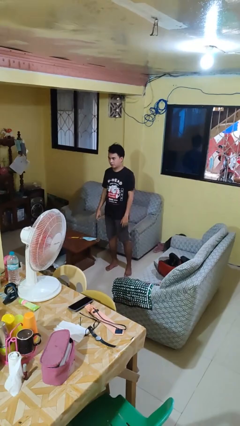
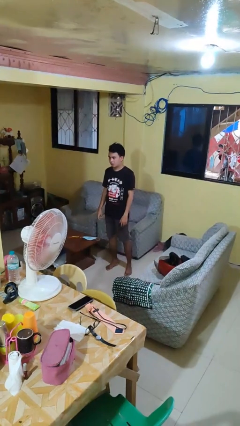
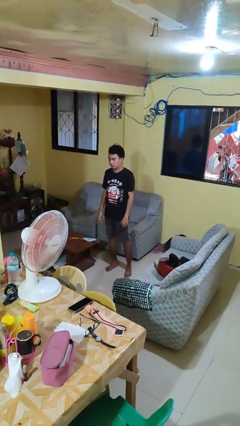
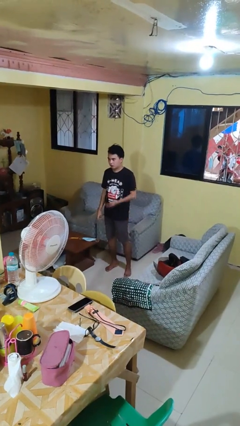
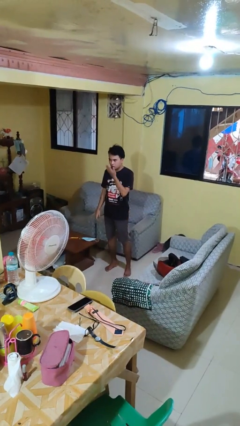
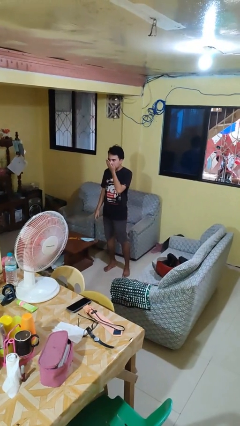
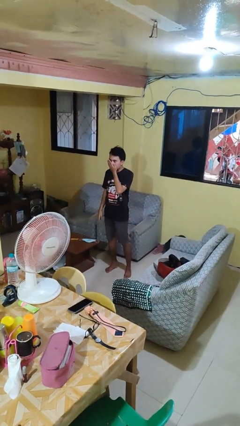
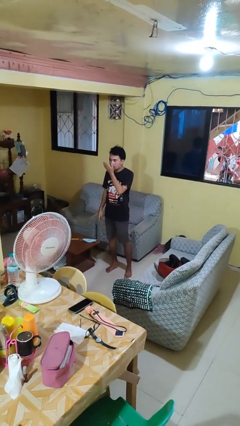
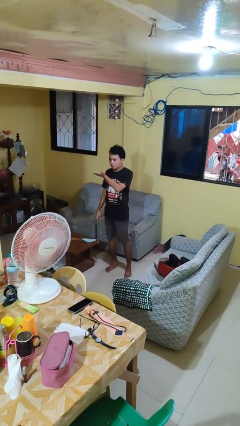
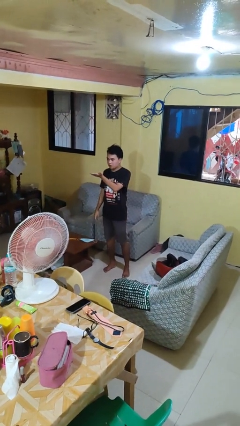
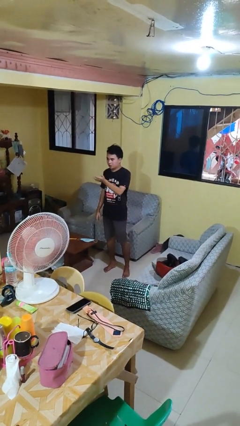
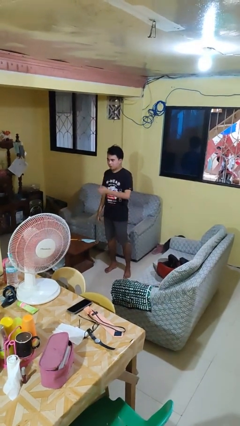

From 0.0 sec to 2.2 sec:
person gestures blow kiss

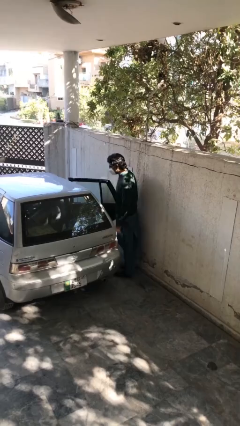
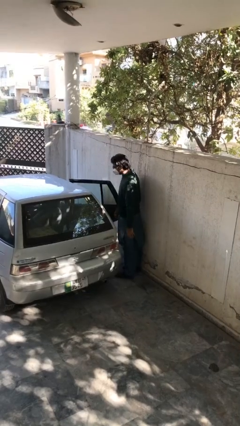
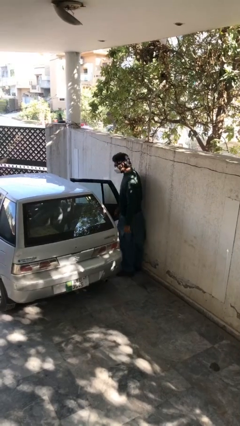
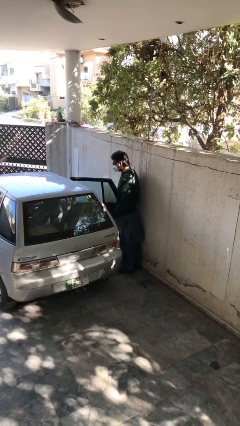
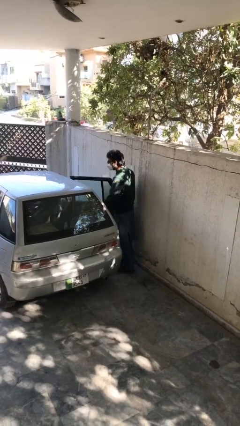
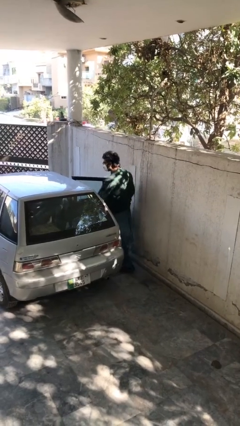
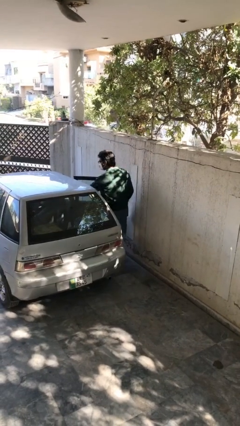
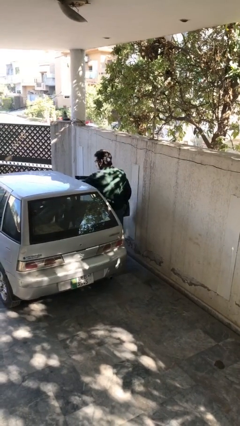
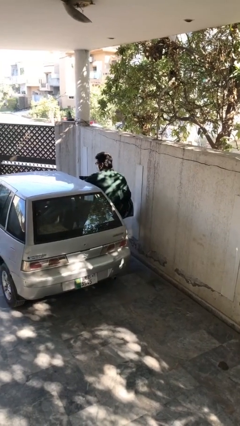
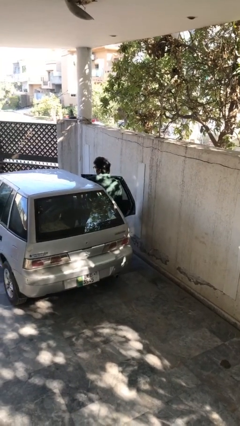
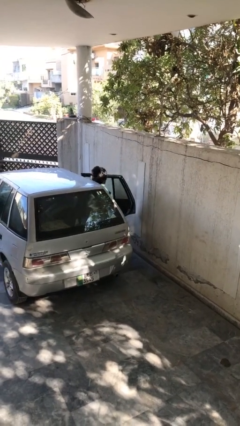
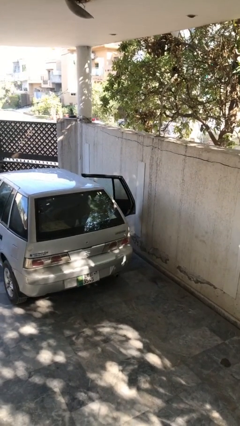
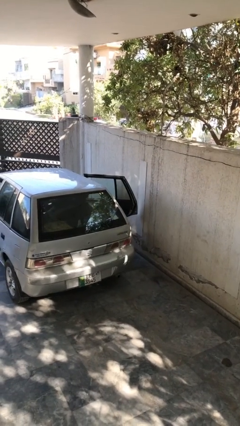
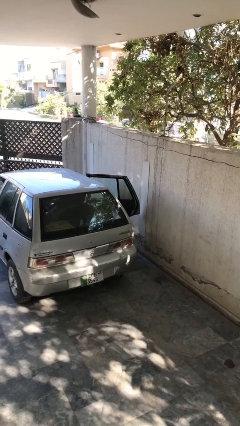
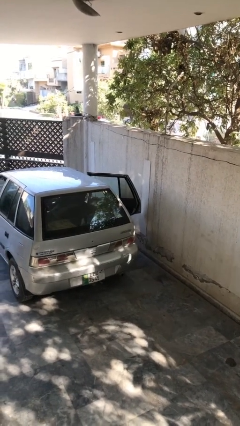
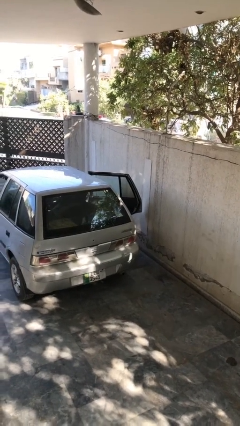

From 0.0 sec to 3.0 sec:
person enters car

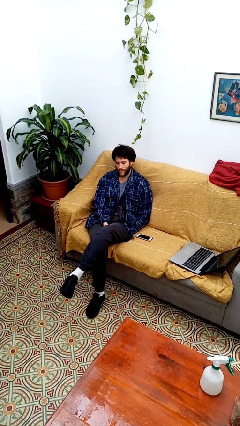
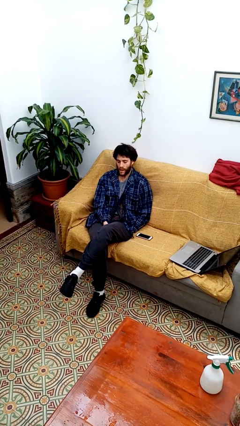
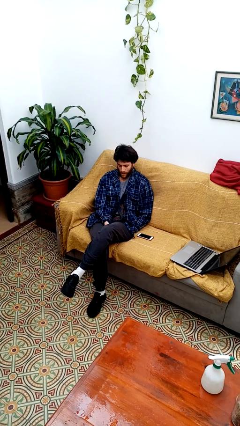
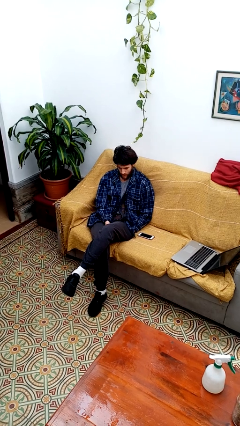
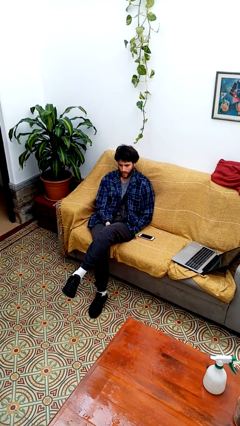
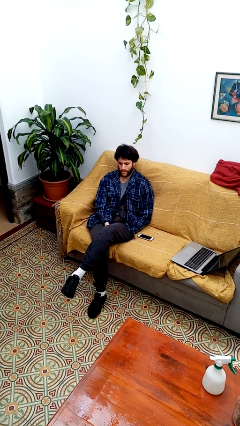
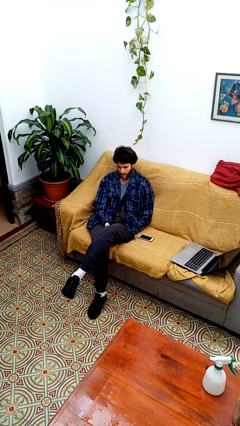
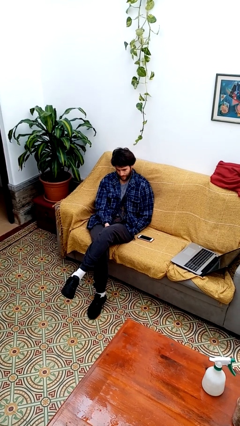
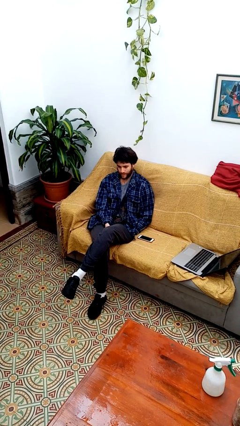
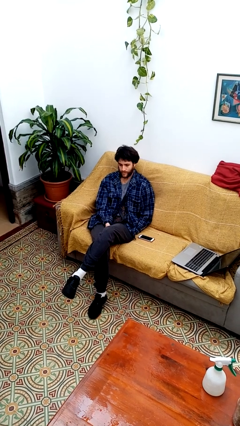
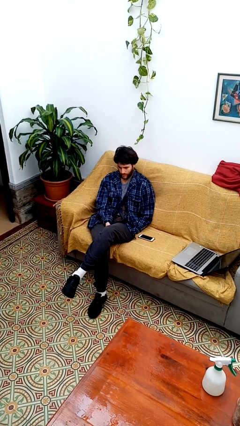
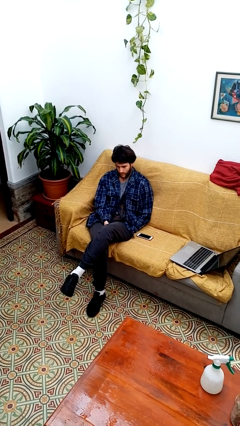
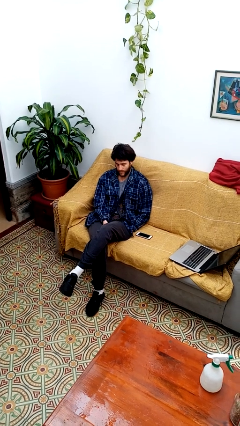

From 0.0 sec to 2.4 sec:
person nods head

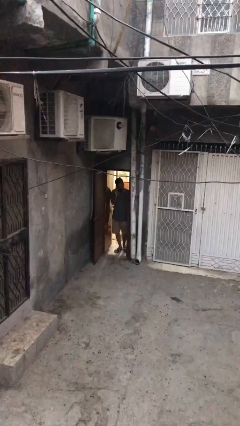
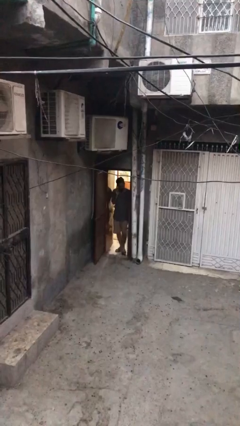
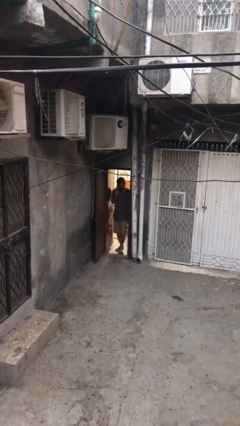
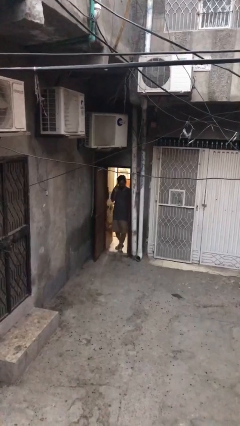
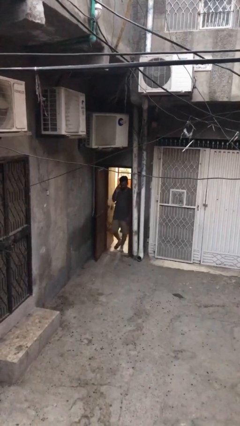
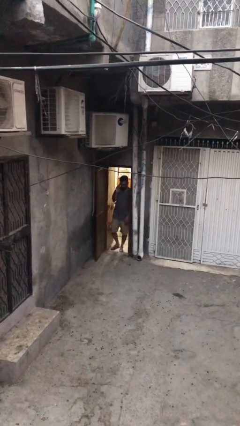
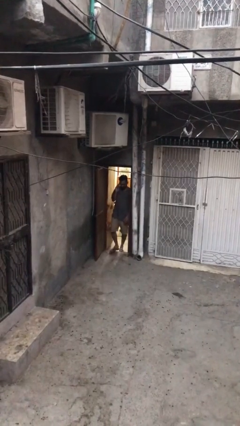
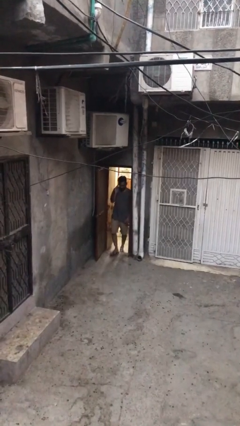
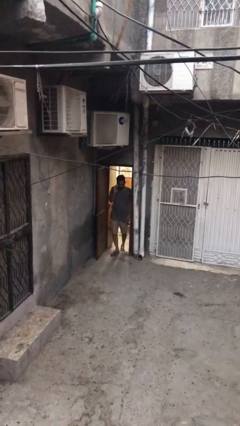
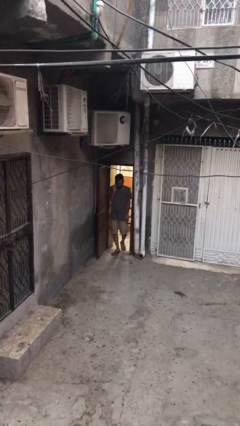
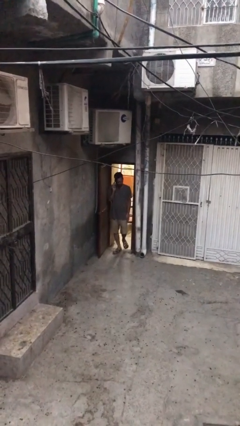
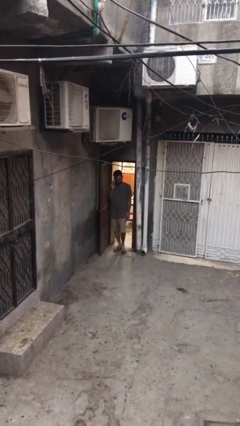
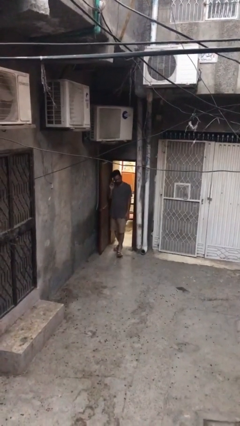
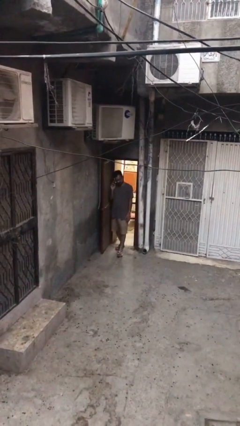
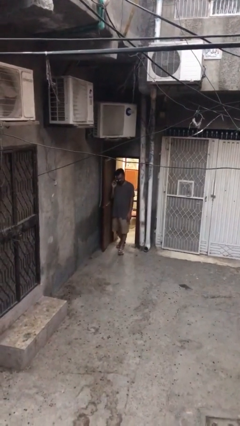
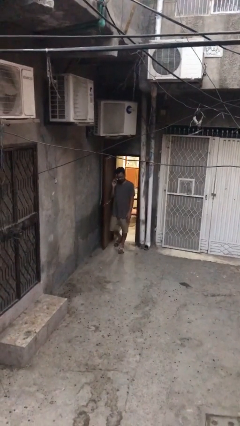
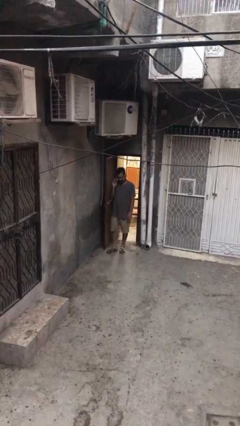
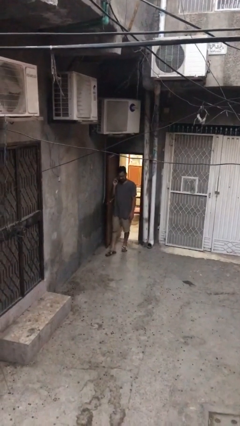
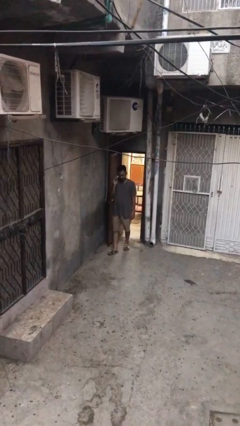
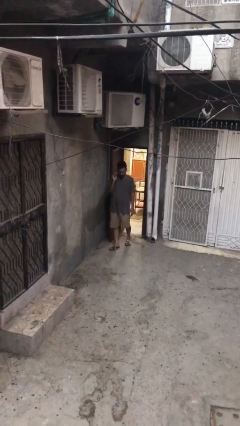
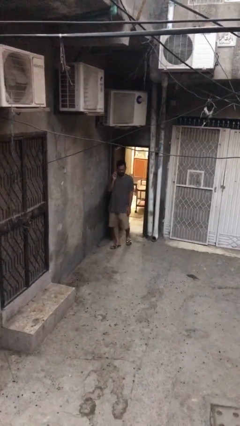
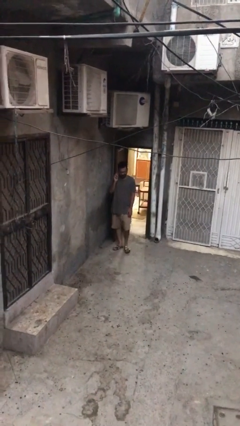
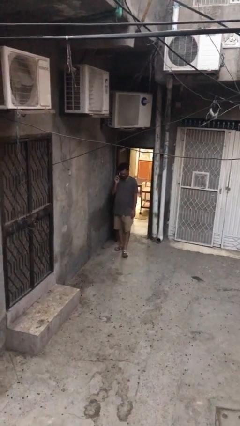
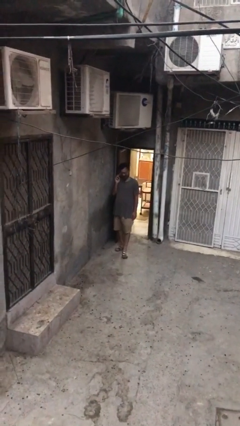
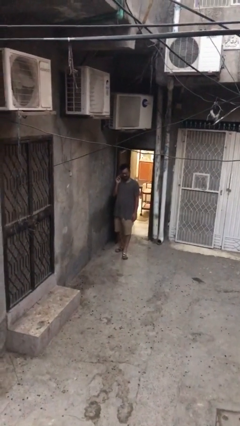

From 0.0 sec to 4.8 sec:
person enters scene through structure

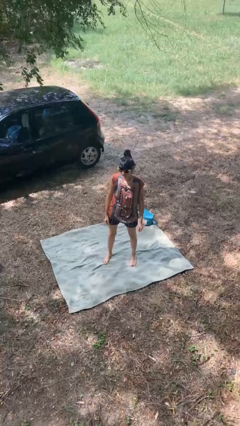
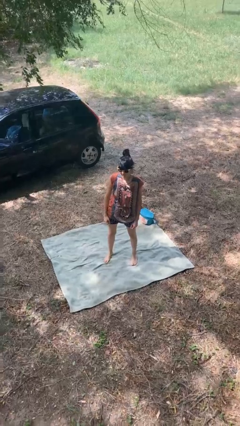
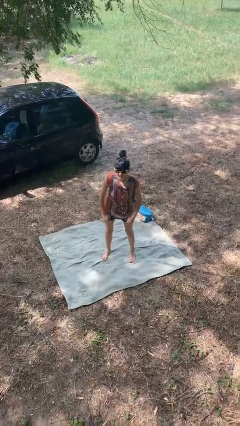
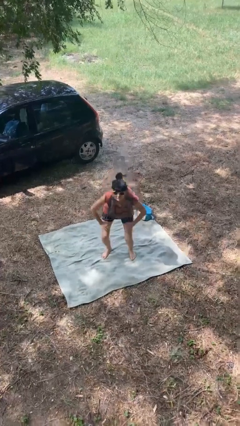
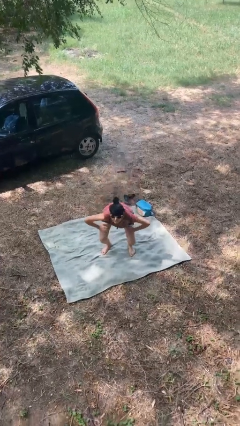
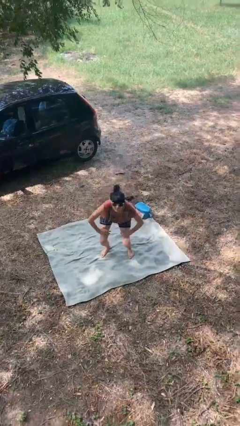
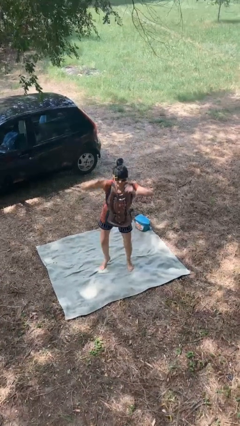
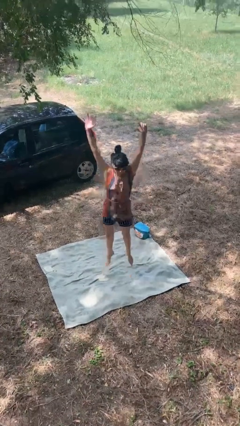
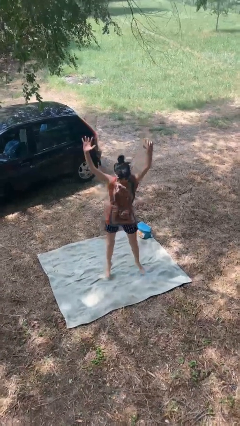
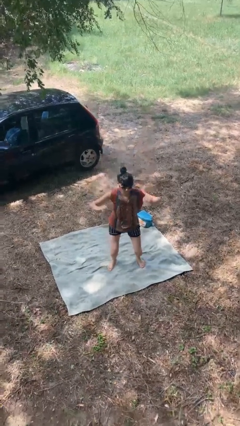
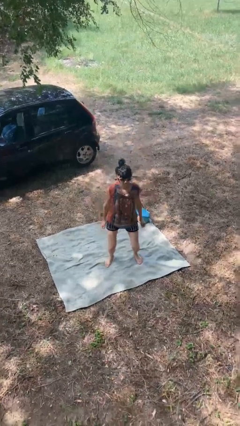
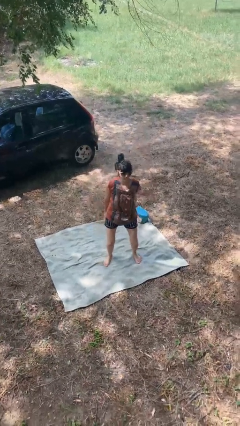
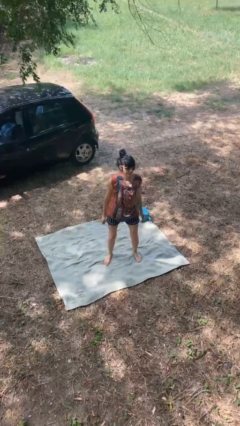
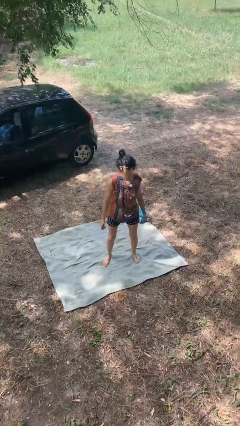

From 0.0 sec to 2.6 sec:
person jumps

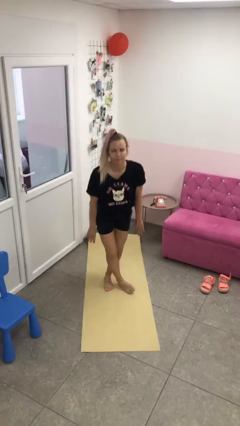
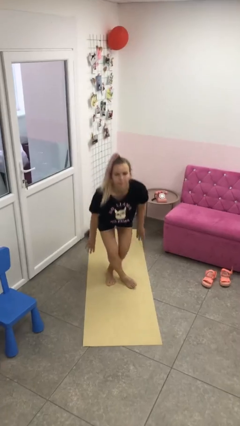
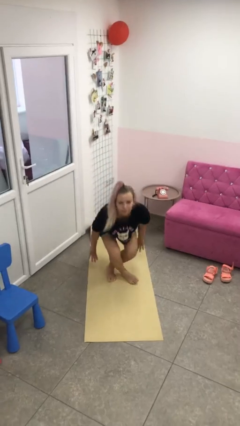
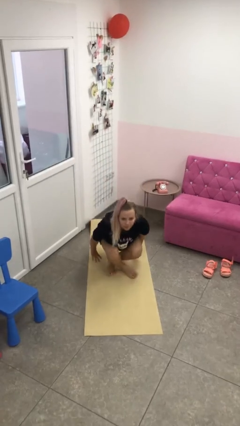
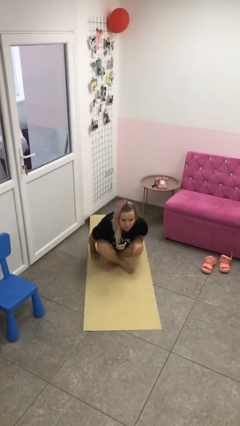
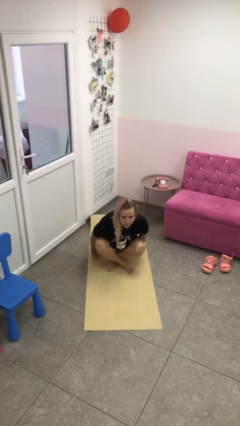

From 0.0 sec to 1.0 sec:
person sits crisscross

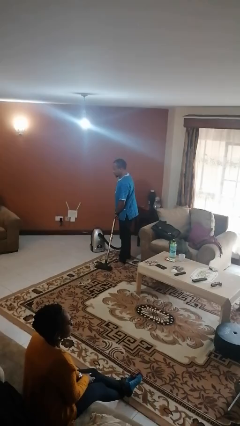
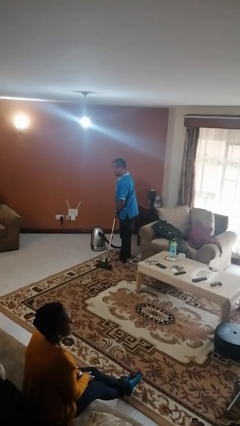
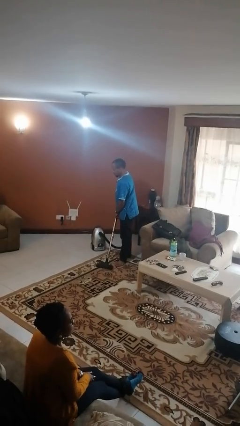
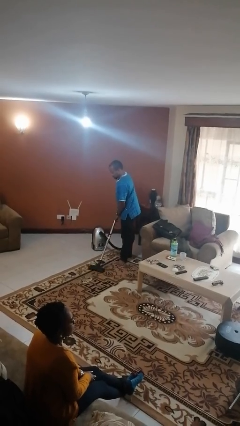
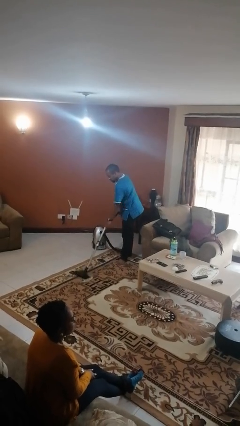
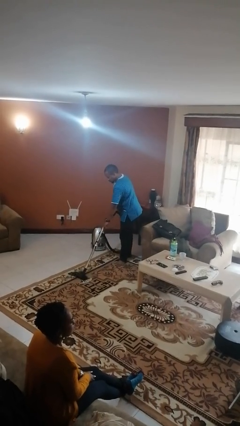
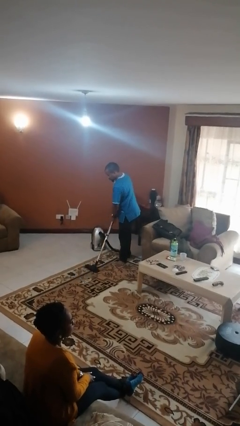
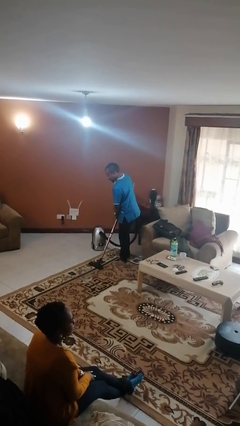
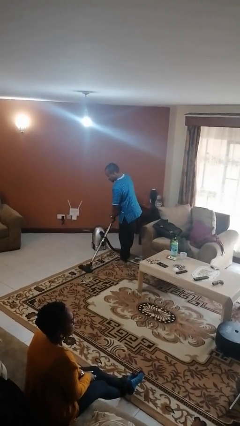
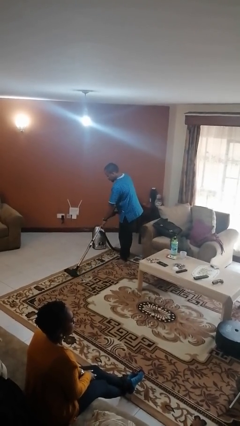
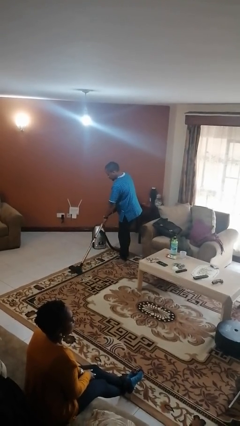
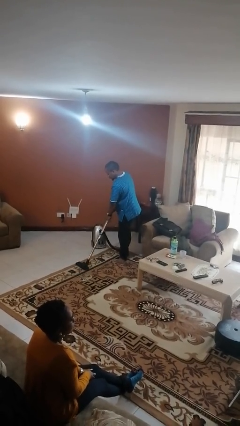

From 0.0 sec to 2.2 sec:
person vacuums carpet
